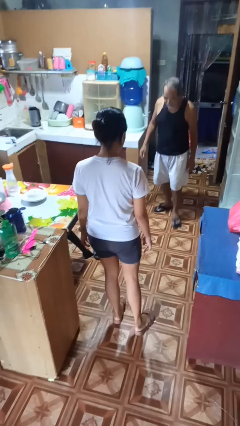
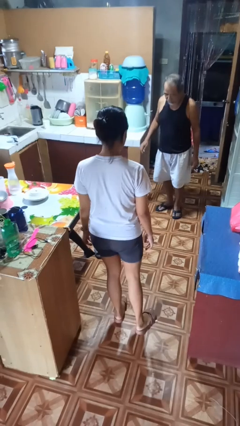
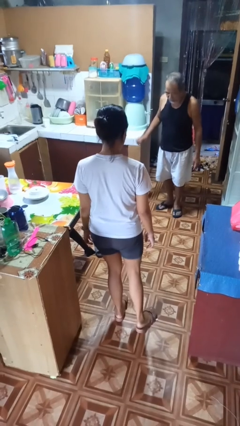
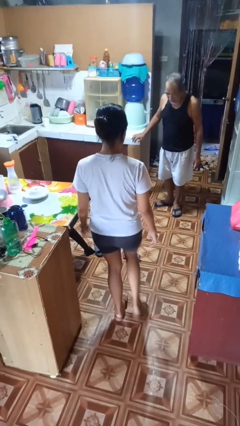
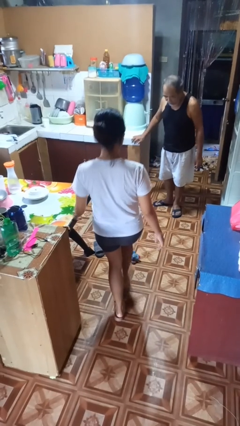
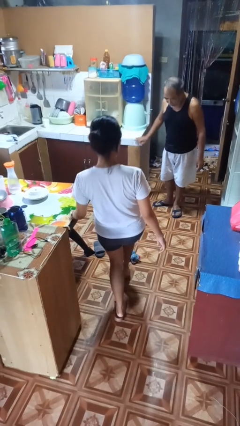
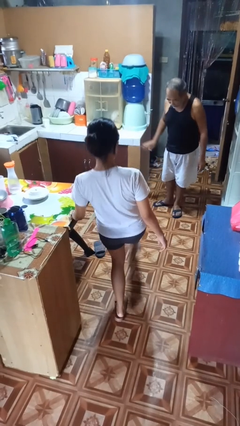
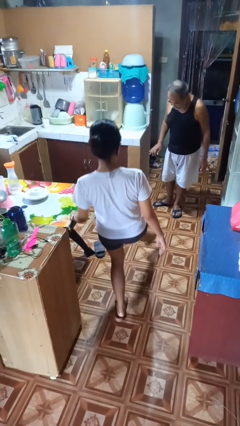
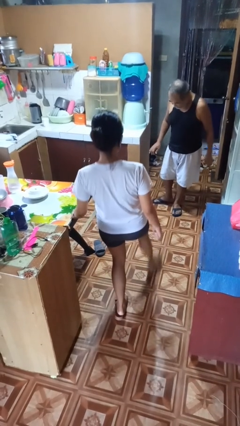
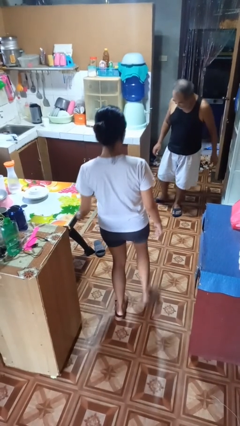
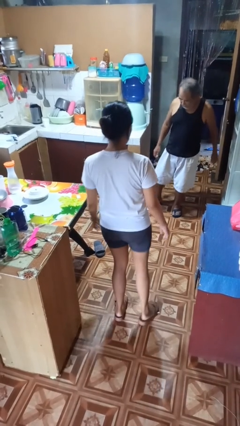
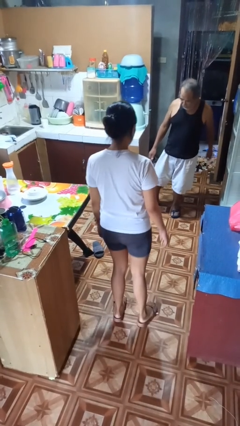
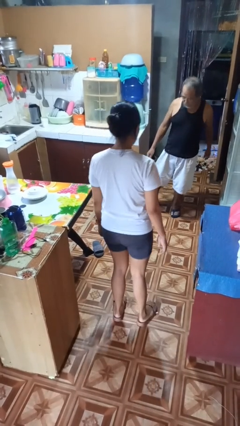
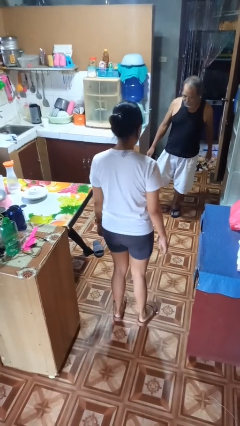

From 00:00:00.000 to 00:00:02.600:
person kicks object to person

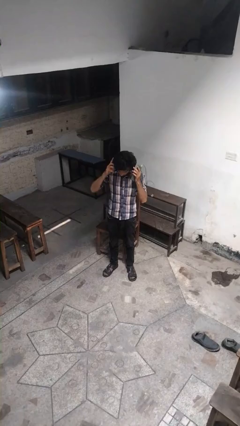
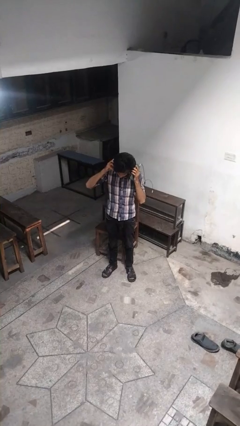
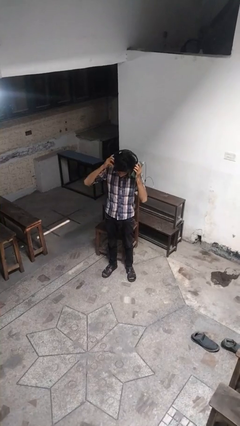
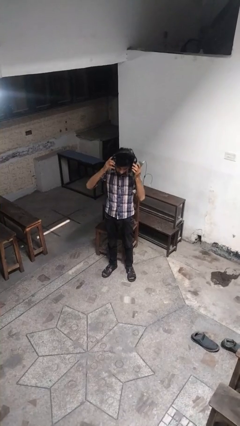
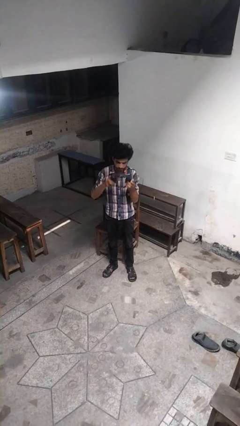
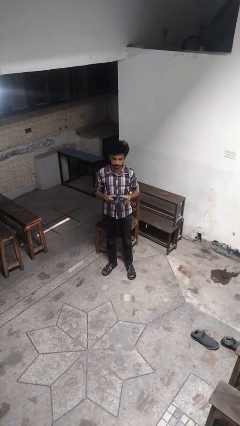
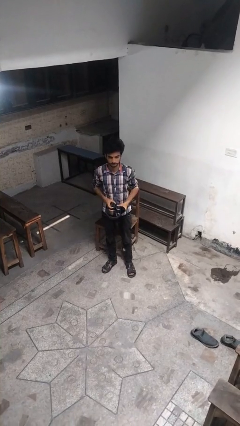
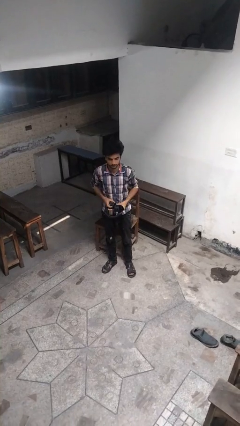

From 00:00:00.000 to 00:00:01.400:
person takes off headphones

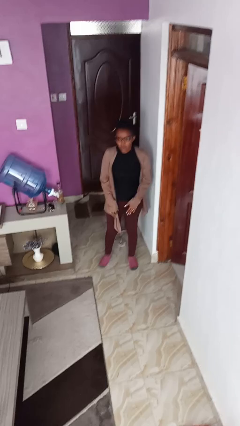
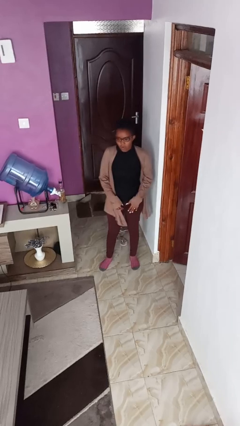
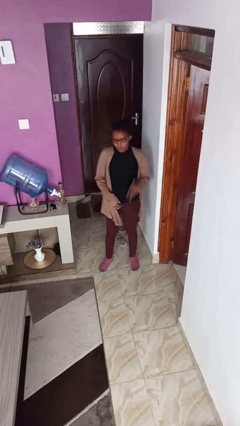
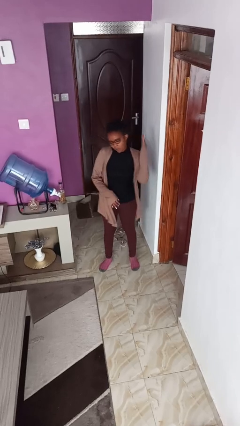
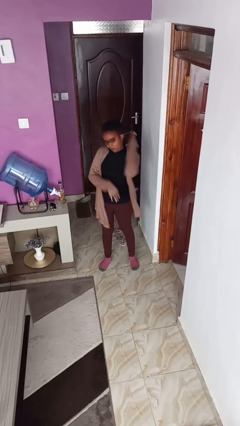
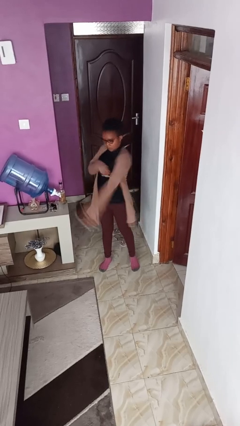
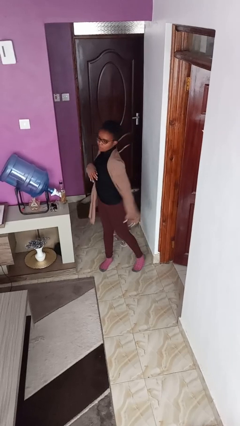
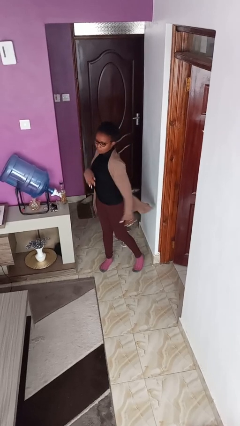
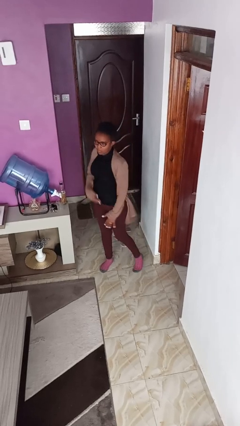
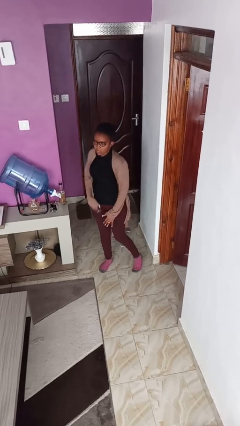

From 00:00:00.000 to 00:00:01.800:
person karate chop

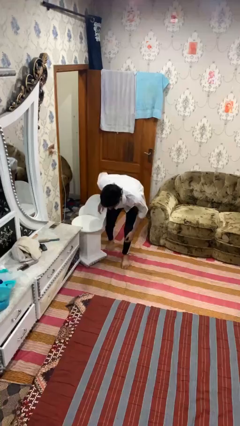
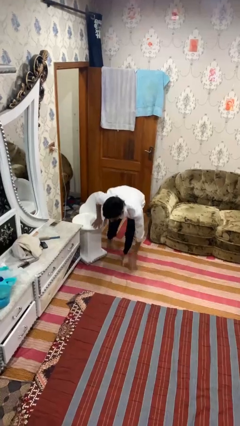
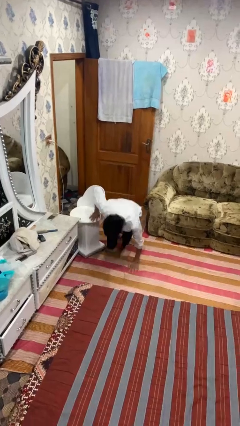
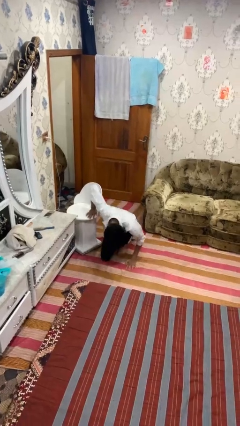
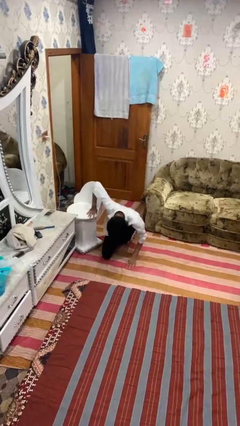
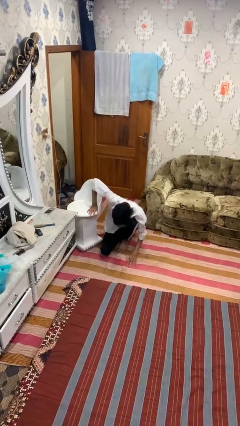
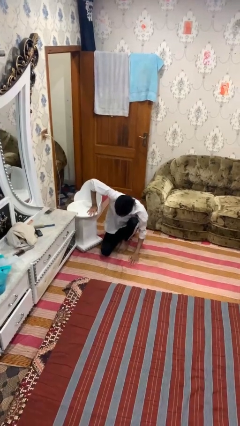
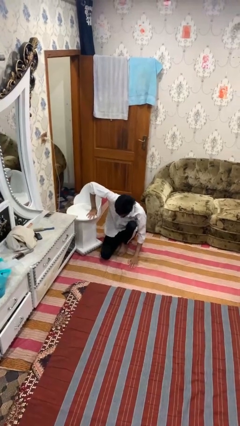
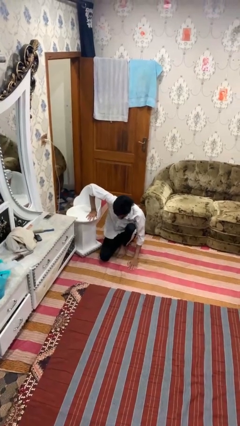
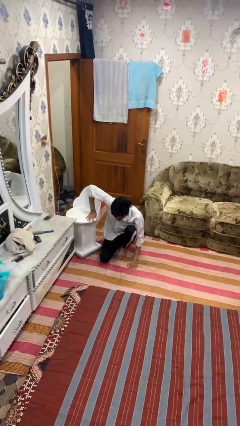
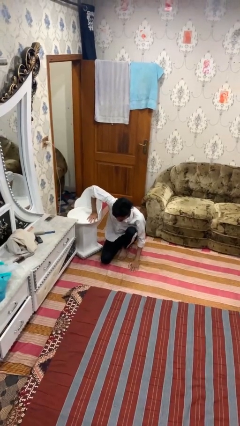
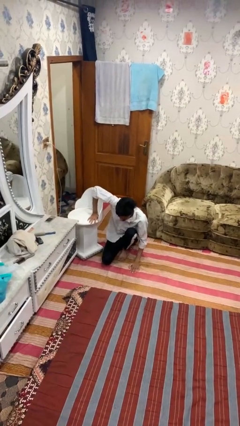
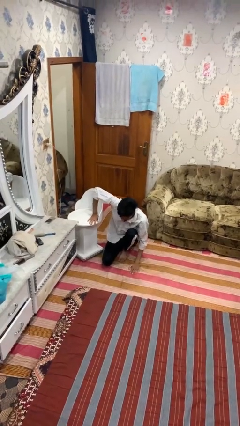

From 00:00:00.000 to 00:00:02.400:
person lies down on floor

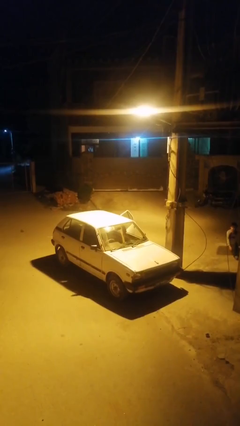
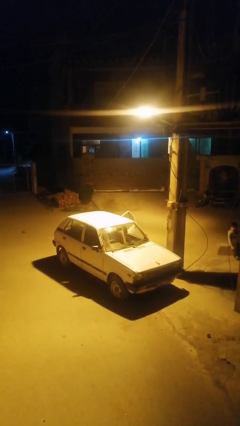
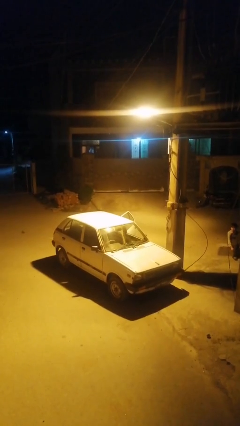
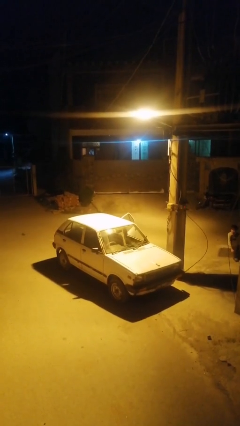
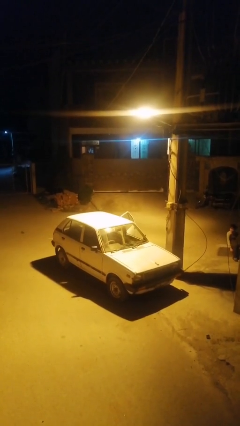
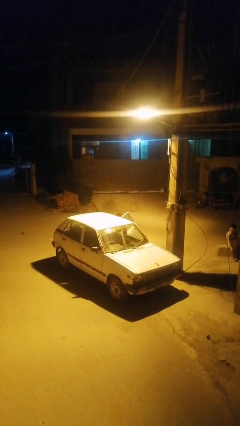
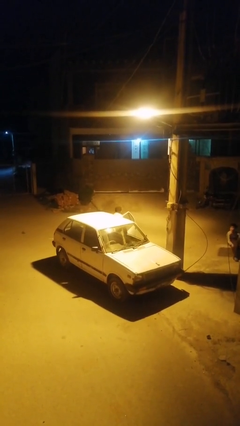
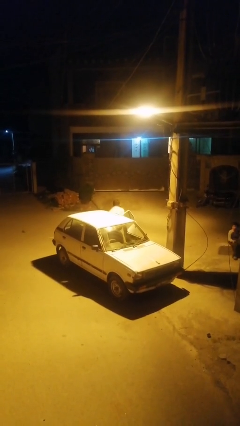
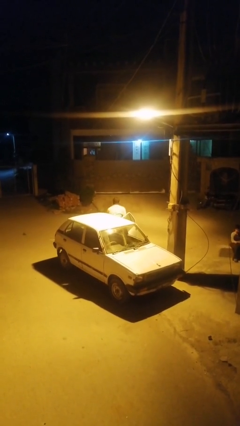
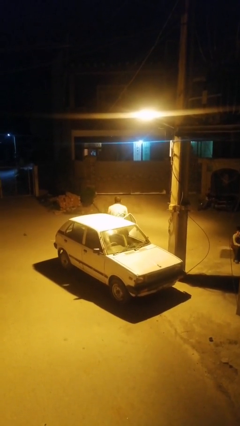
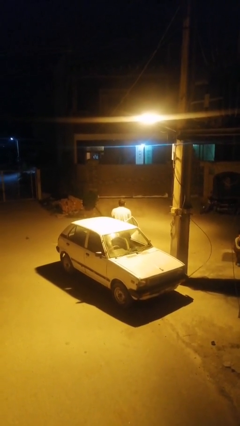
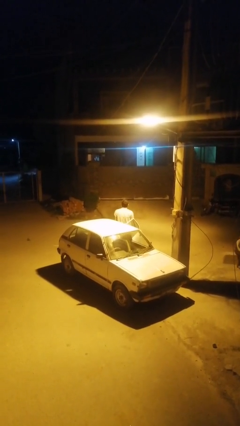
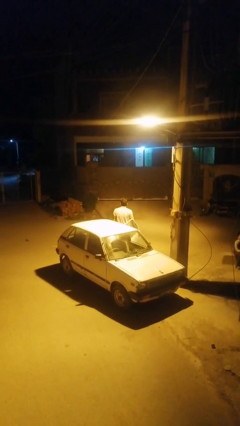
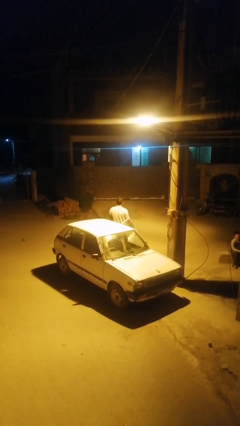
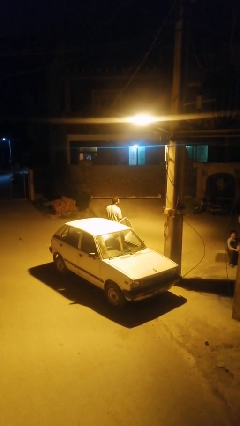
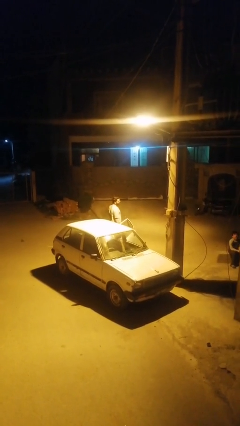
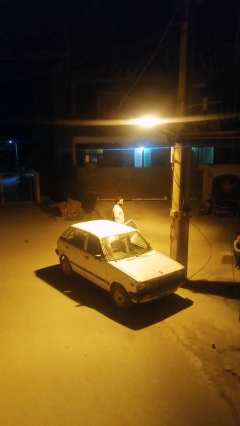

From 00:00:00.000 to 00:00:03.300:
person exits car

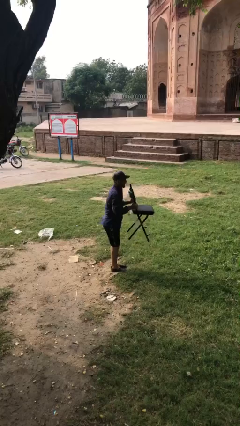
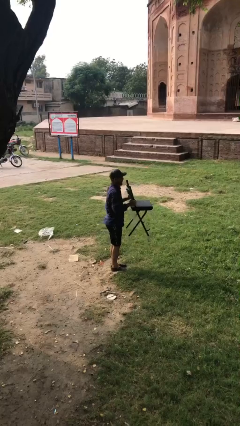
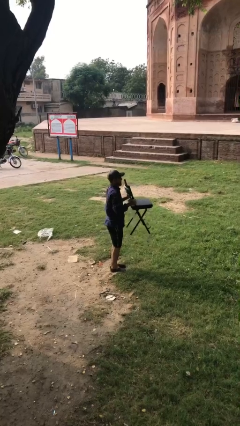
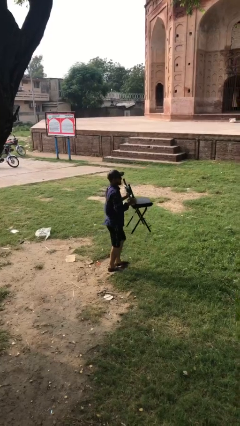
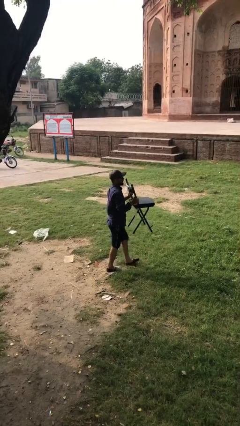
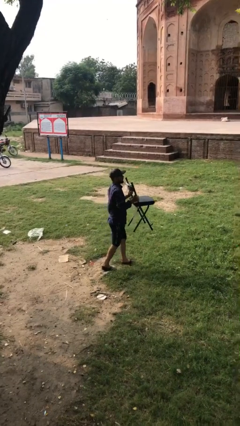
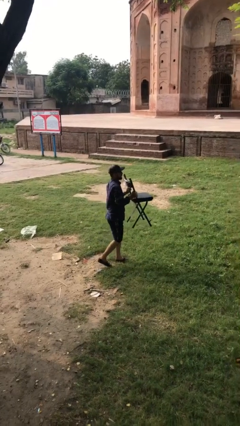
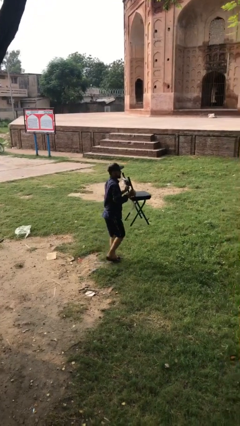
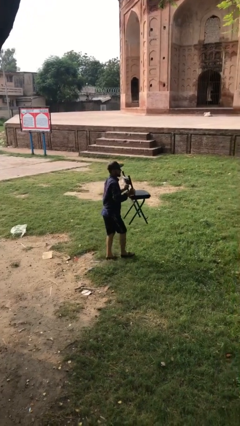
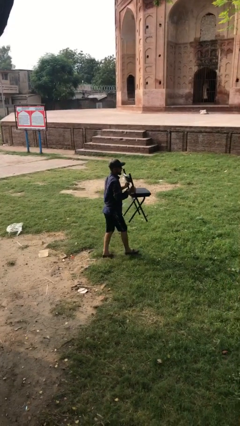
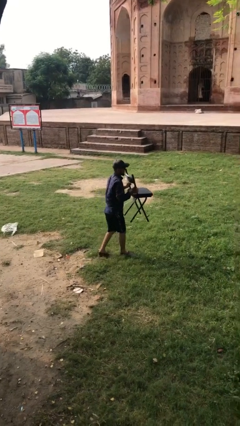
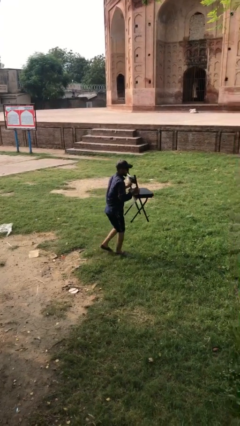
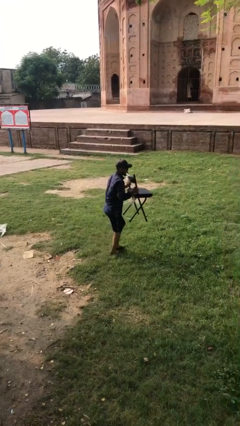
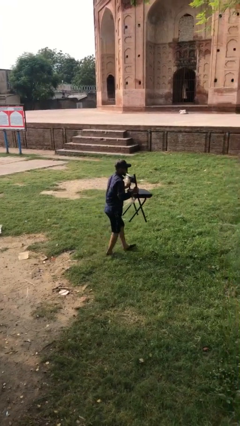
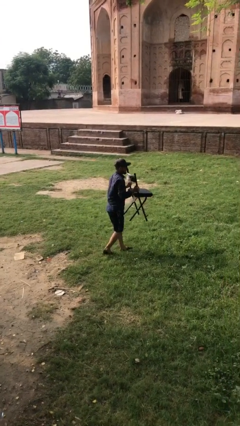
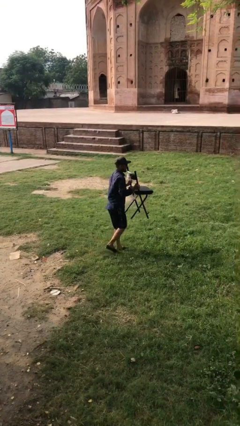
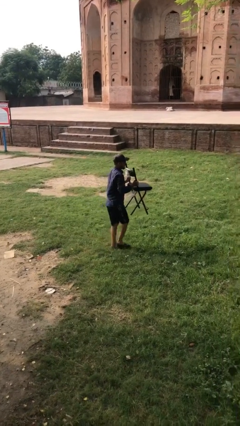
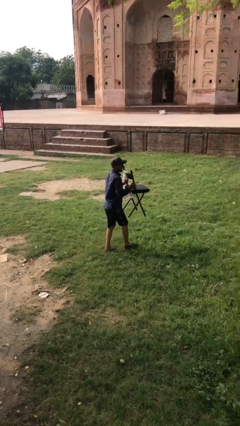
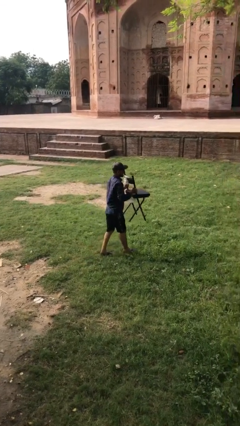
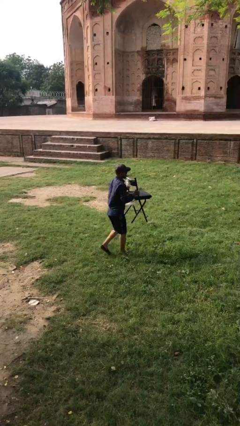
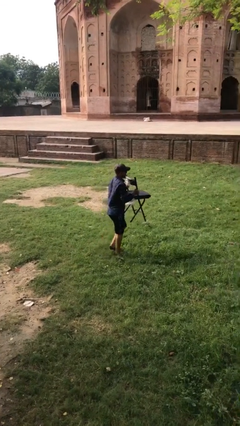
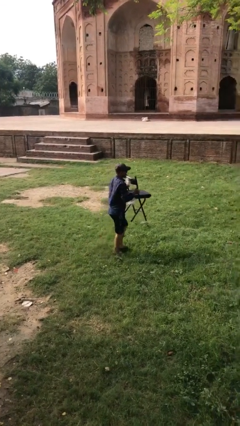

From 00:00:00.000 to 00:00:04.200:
person carries heavy object

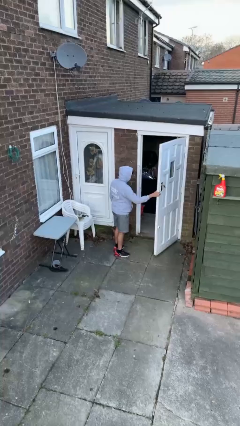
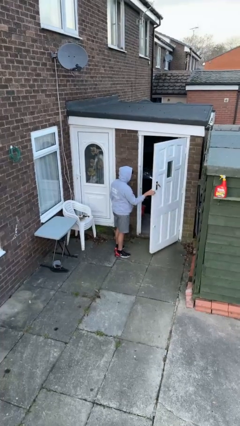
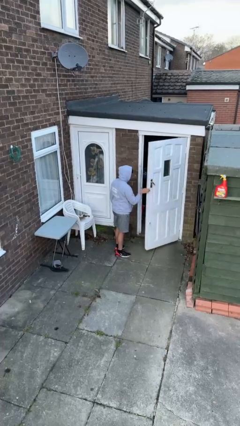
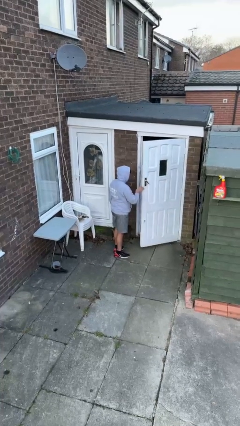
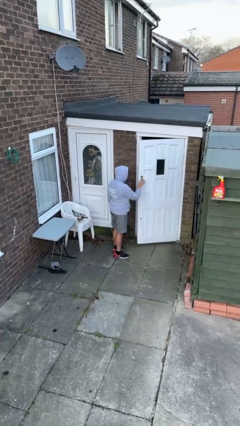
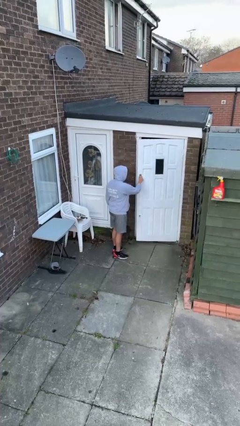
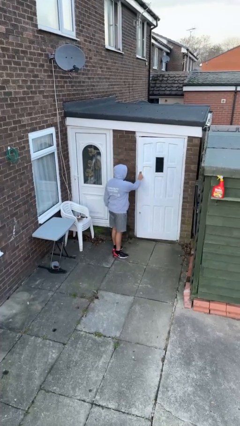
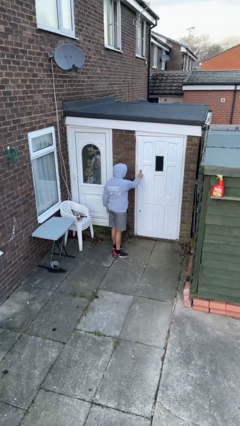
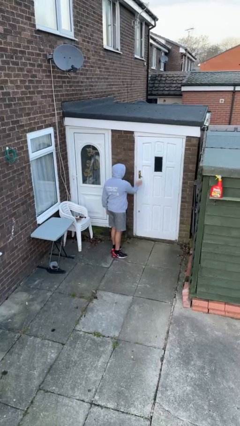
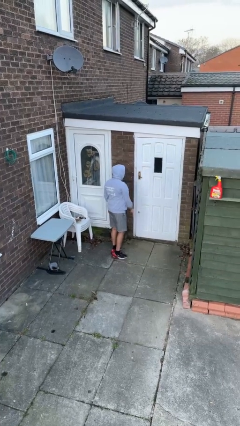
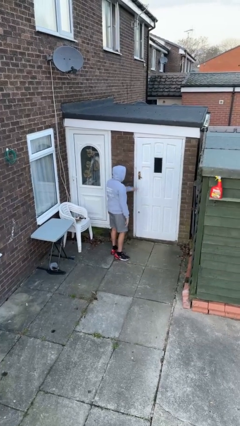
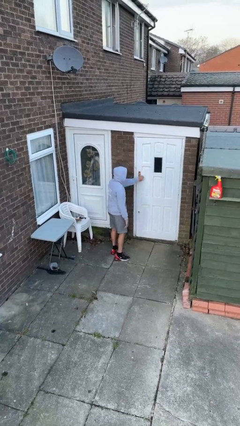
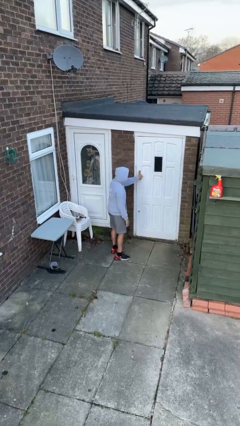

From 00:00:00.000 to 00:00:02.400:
person closes facility door
